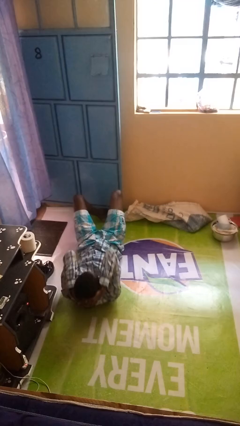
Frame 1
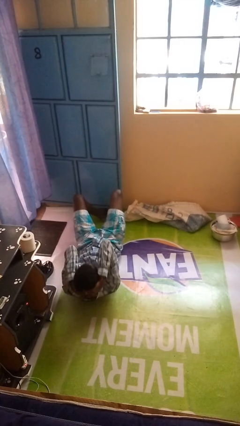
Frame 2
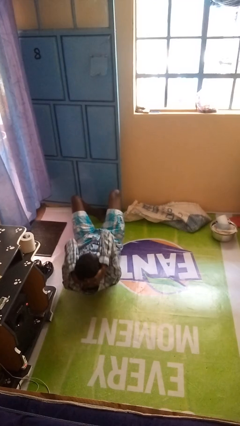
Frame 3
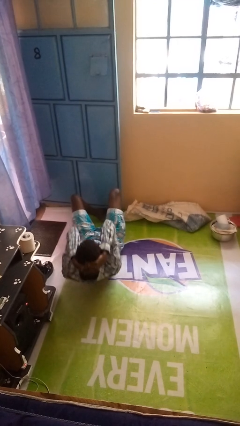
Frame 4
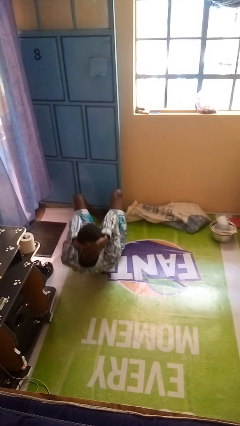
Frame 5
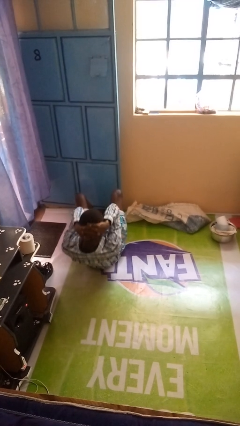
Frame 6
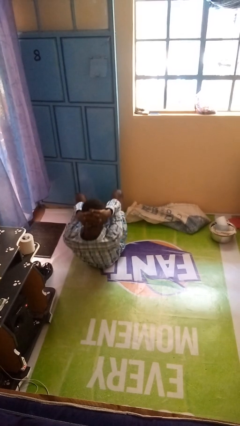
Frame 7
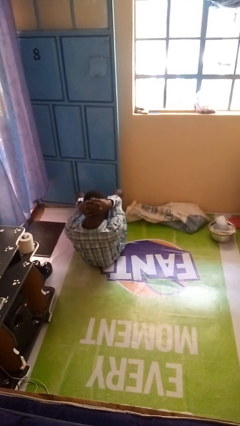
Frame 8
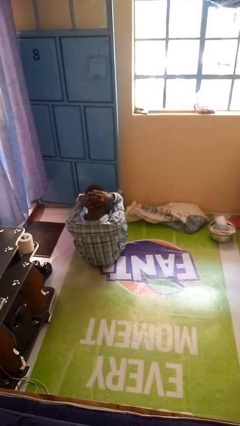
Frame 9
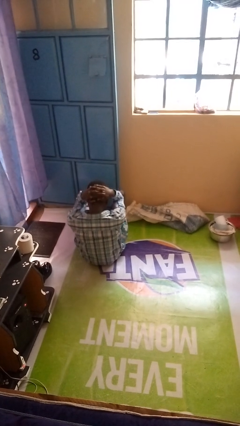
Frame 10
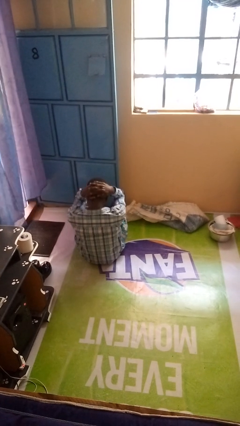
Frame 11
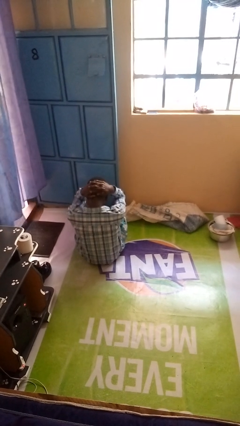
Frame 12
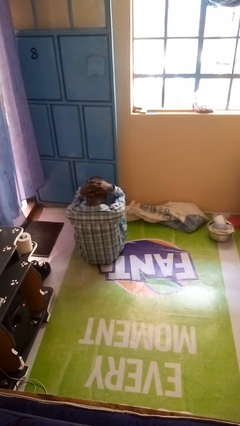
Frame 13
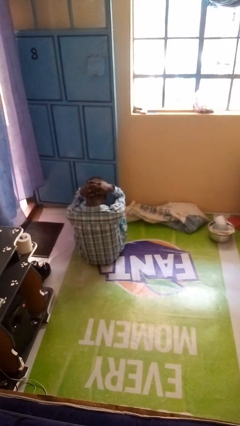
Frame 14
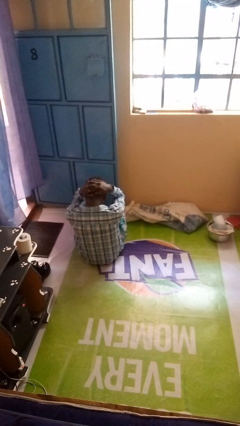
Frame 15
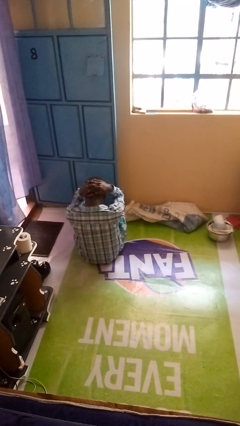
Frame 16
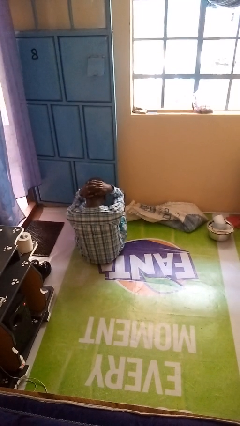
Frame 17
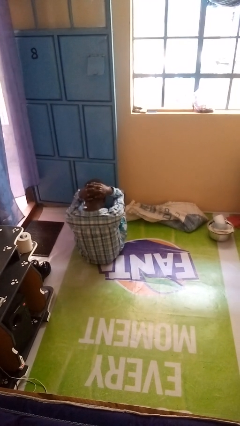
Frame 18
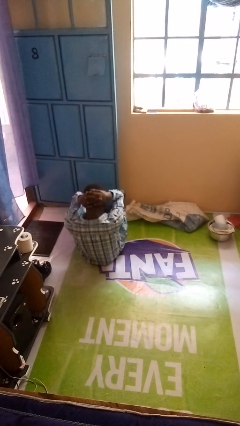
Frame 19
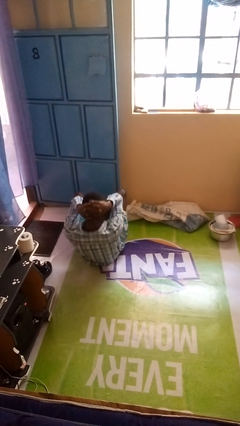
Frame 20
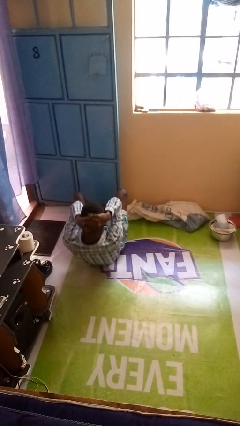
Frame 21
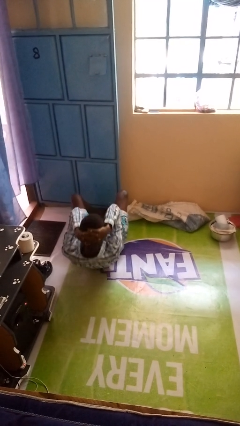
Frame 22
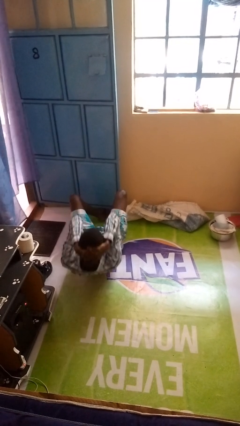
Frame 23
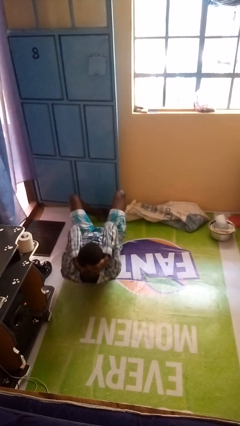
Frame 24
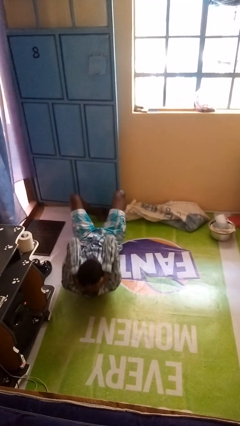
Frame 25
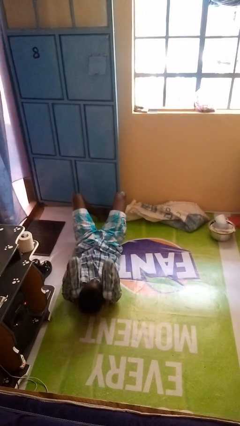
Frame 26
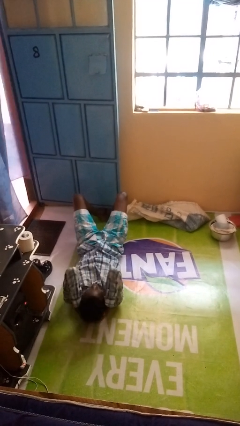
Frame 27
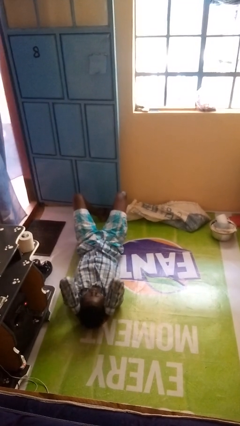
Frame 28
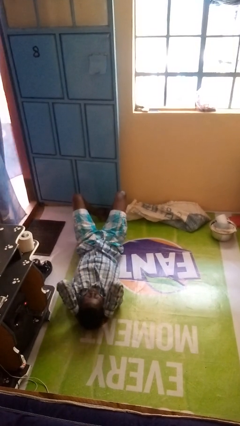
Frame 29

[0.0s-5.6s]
person exercises with situp

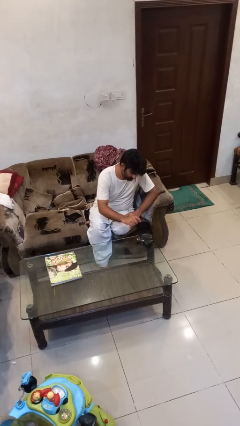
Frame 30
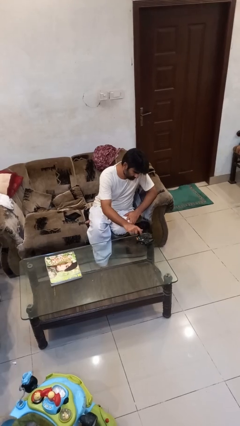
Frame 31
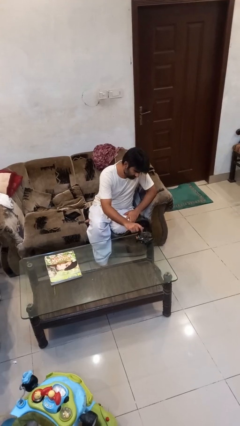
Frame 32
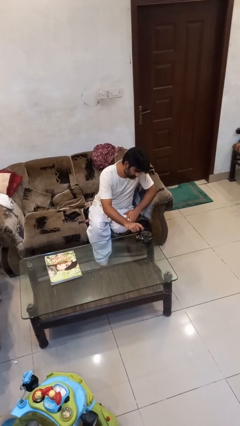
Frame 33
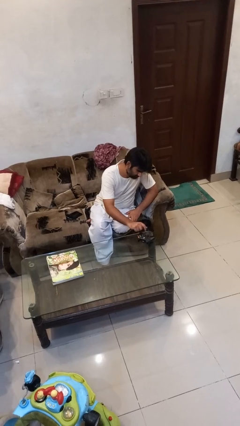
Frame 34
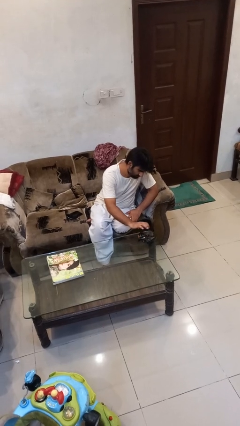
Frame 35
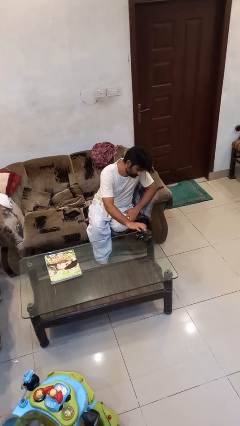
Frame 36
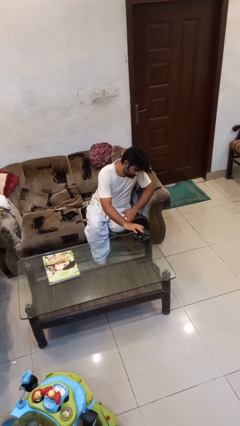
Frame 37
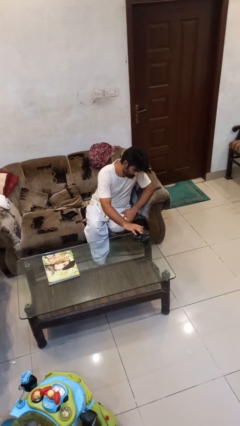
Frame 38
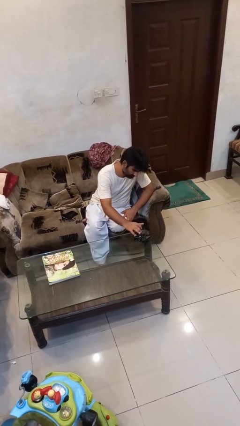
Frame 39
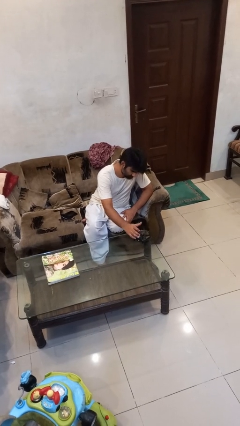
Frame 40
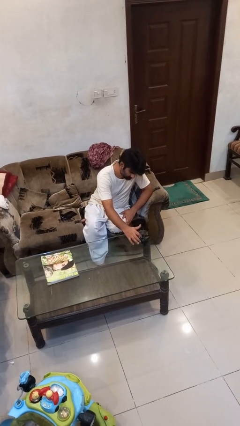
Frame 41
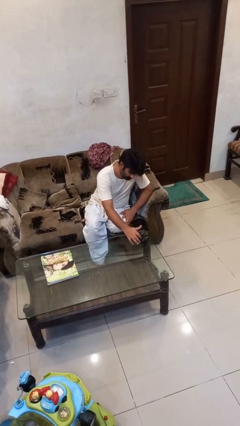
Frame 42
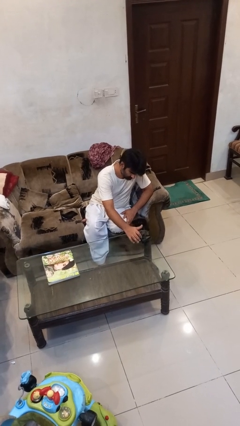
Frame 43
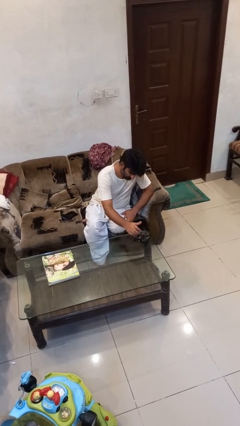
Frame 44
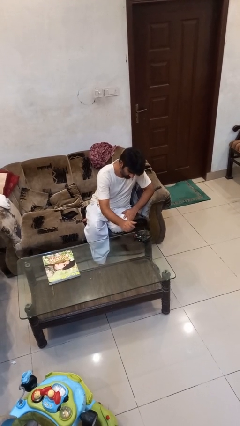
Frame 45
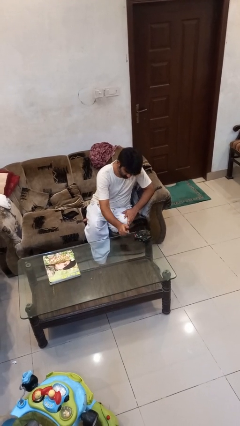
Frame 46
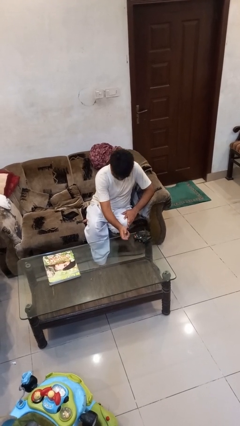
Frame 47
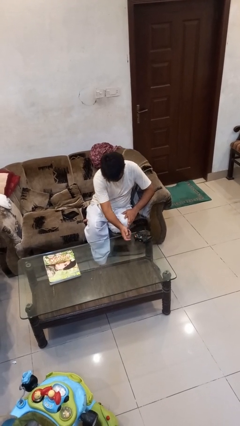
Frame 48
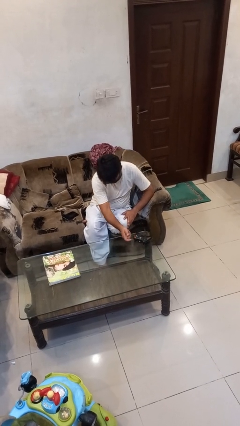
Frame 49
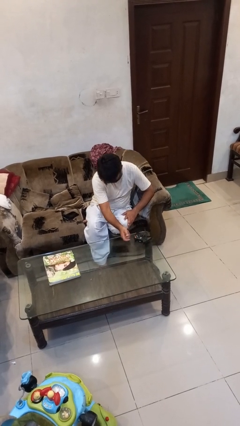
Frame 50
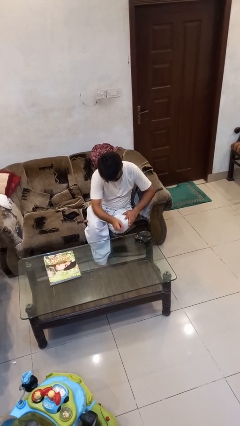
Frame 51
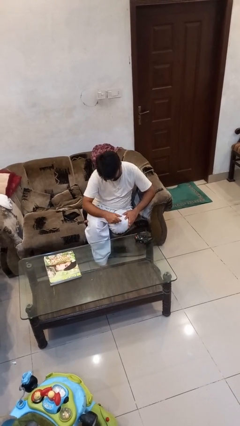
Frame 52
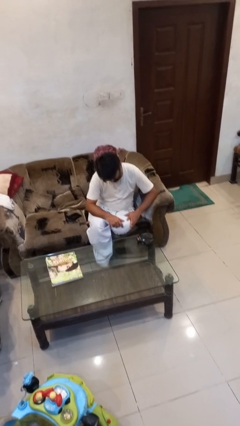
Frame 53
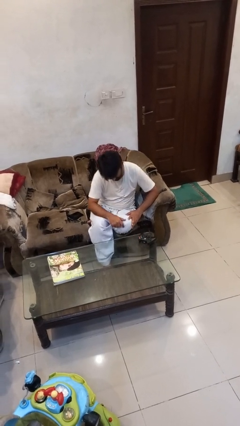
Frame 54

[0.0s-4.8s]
person taps object with finger

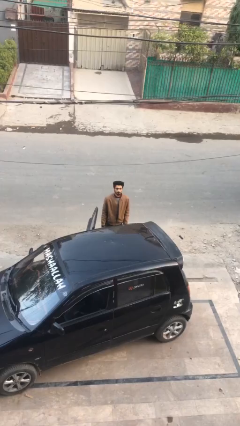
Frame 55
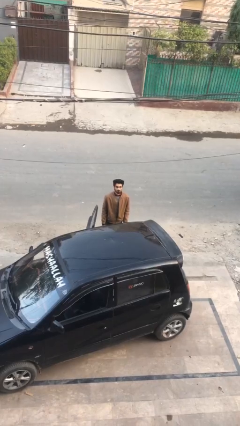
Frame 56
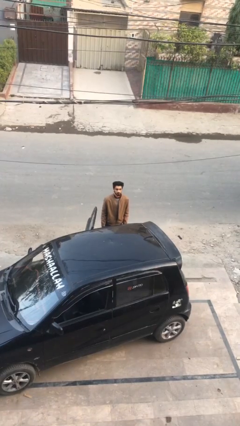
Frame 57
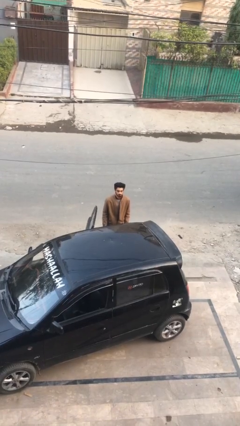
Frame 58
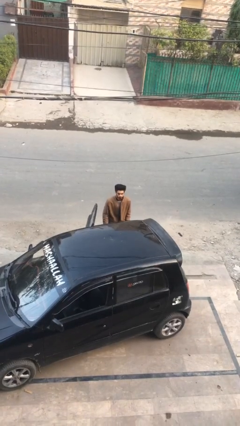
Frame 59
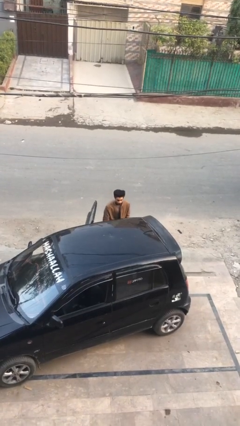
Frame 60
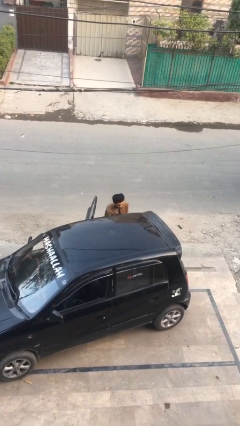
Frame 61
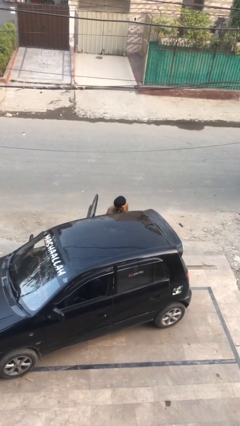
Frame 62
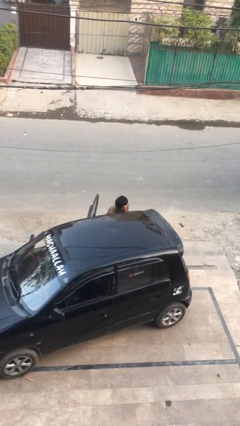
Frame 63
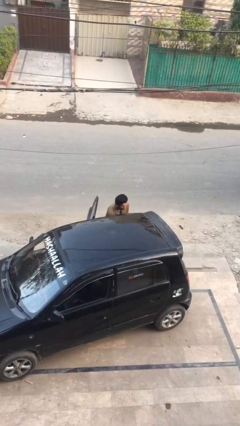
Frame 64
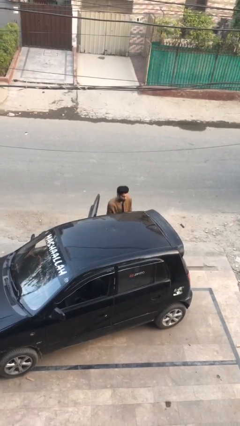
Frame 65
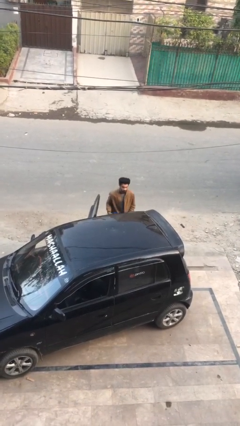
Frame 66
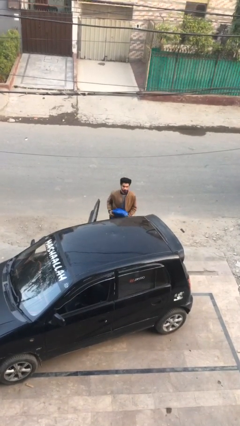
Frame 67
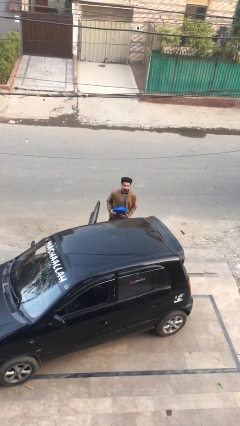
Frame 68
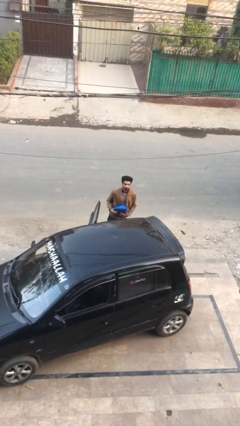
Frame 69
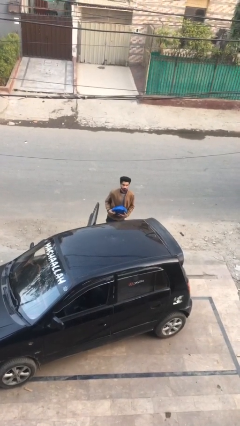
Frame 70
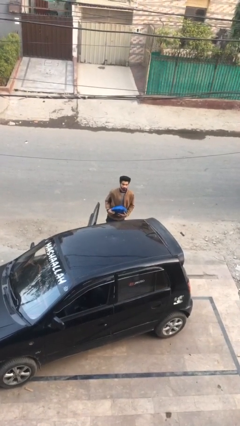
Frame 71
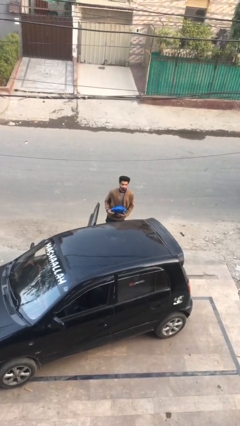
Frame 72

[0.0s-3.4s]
person unloads car

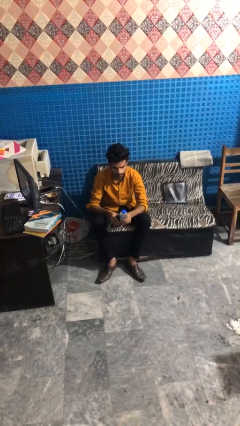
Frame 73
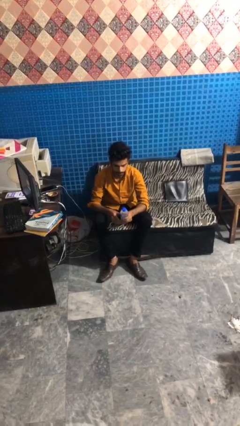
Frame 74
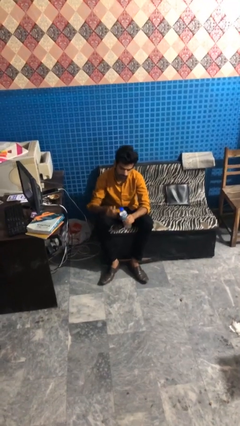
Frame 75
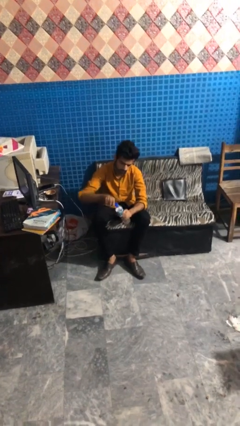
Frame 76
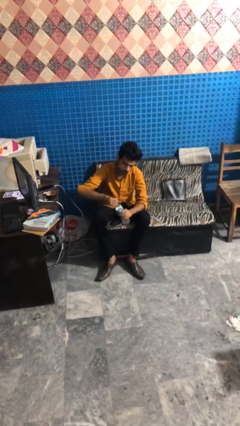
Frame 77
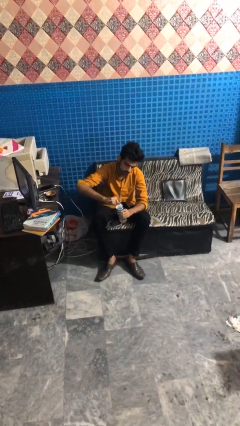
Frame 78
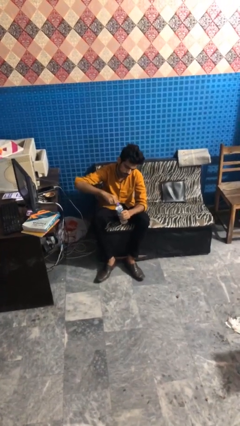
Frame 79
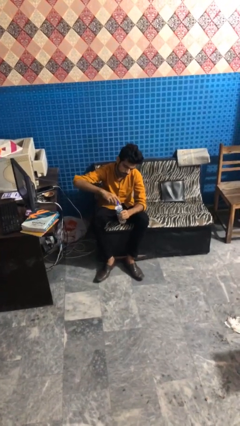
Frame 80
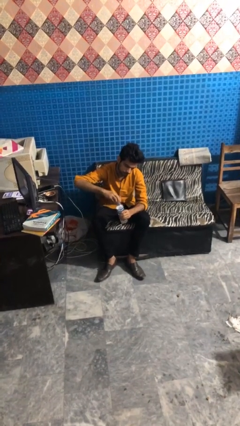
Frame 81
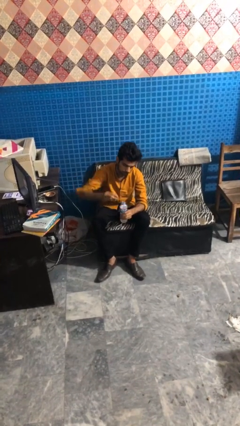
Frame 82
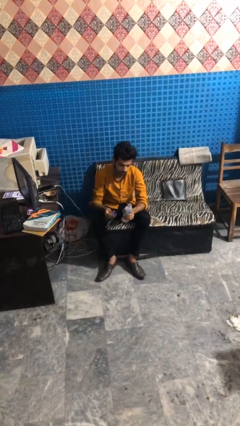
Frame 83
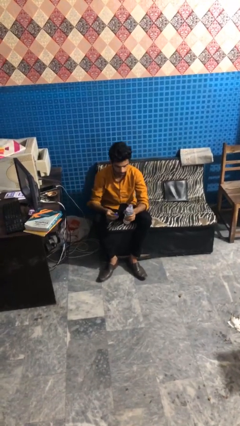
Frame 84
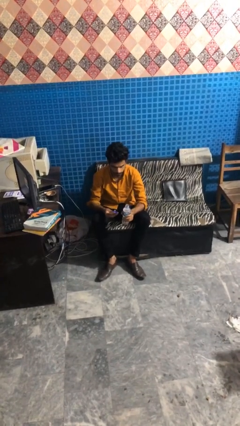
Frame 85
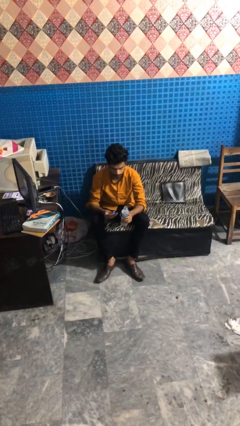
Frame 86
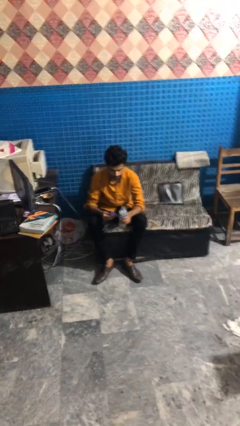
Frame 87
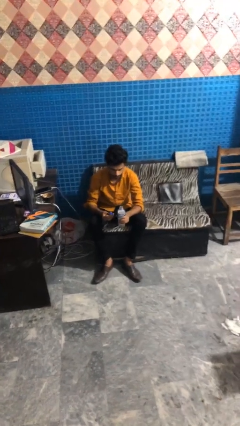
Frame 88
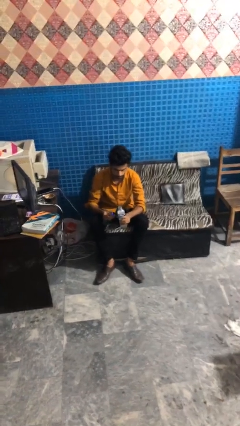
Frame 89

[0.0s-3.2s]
person unscrews lid from bottle

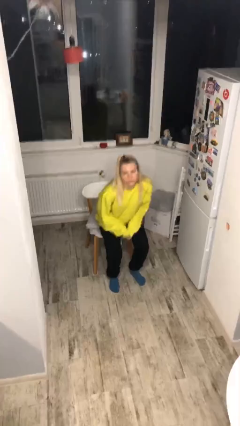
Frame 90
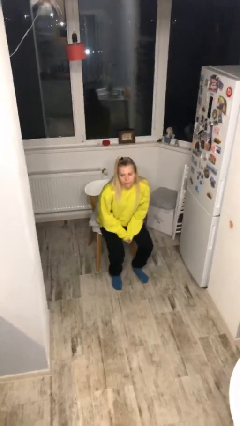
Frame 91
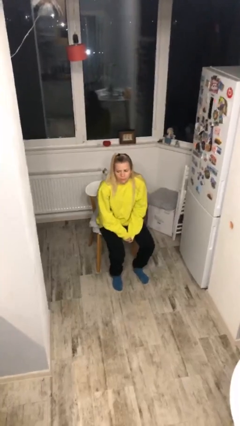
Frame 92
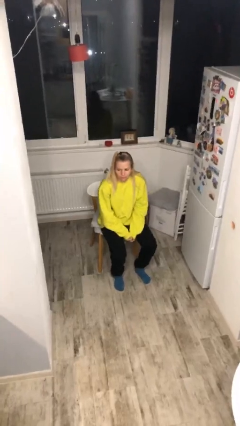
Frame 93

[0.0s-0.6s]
person sits down
